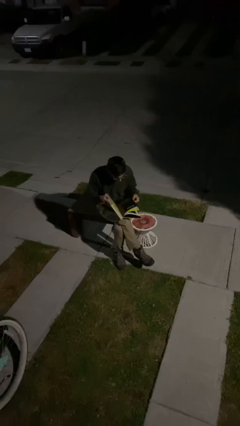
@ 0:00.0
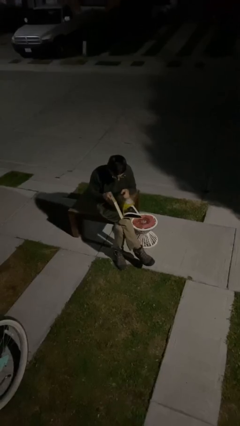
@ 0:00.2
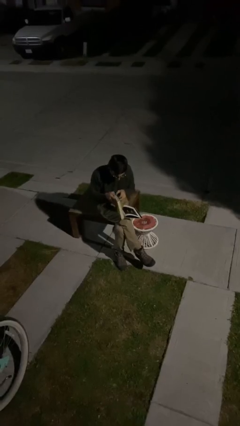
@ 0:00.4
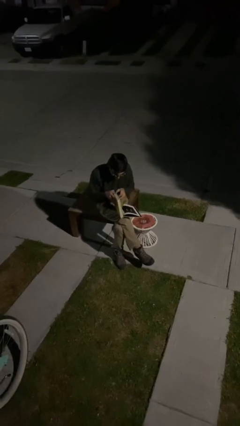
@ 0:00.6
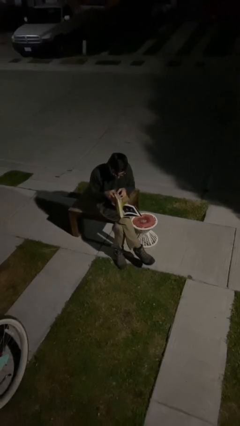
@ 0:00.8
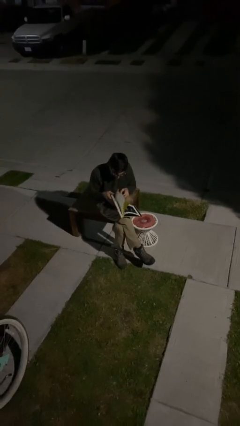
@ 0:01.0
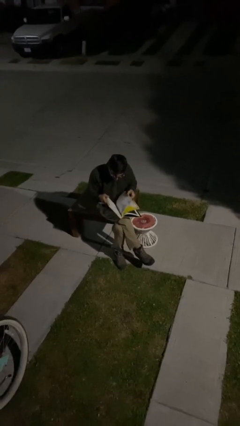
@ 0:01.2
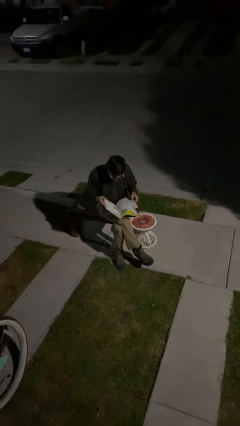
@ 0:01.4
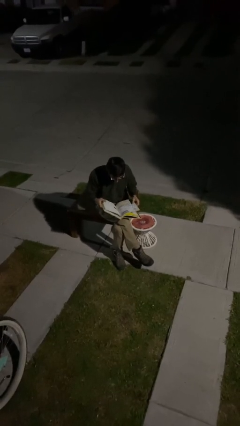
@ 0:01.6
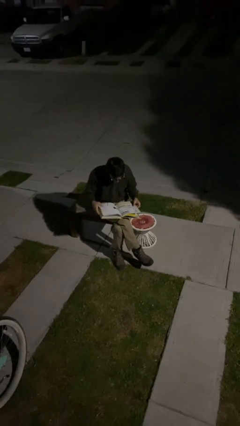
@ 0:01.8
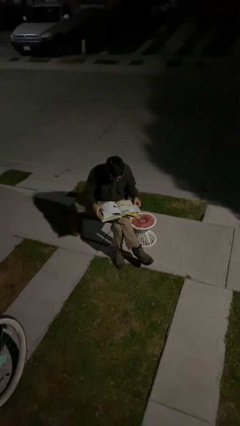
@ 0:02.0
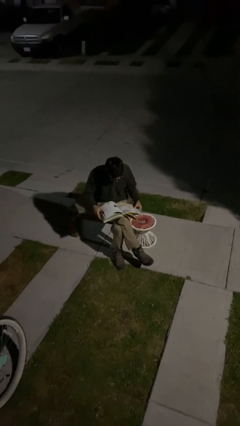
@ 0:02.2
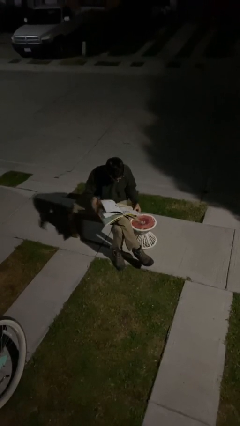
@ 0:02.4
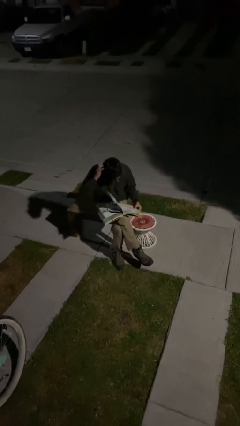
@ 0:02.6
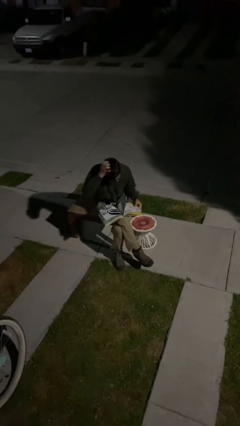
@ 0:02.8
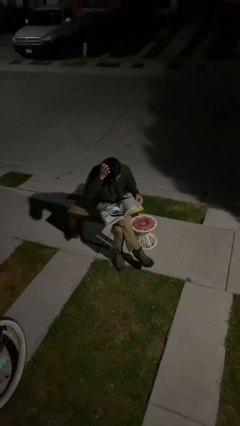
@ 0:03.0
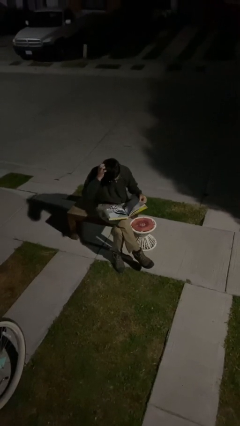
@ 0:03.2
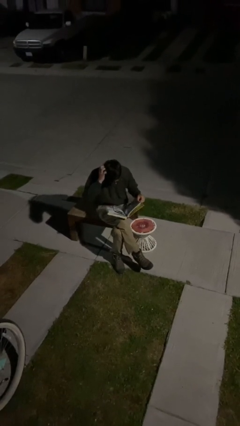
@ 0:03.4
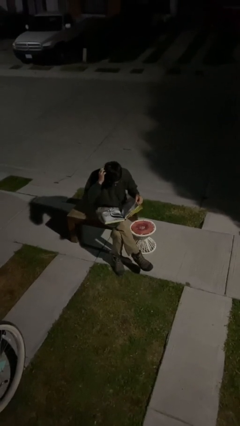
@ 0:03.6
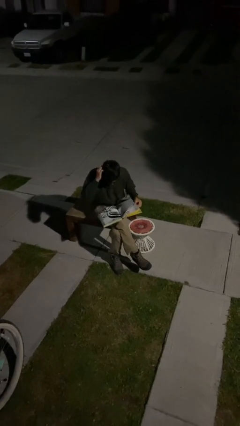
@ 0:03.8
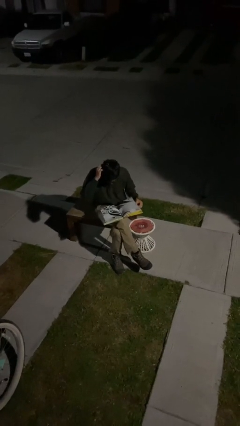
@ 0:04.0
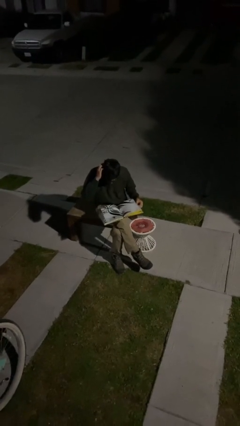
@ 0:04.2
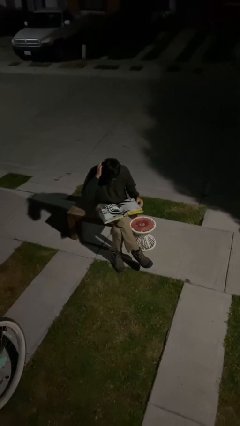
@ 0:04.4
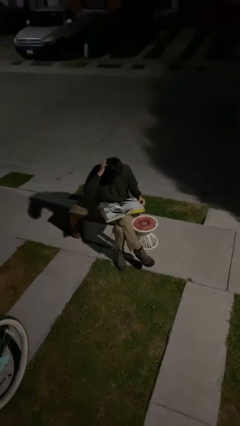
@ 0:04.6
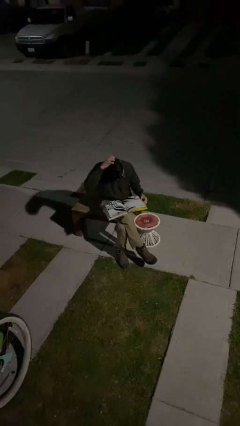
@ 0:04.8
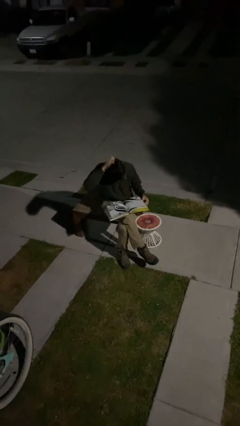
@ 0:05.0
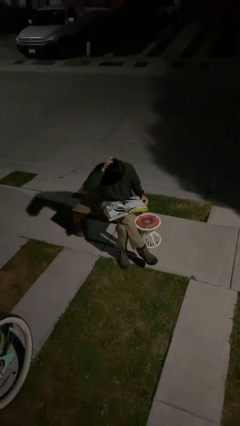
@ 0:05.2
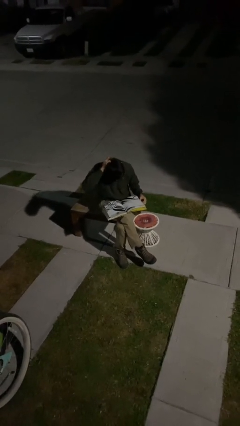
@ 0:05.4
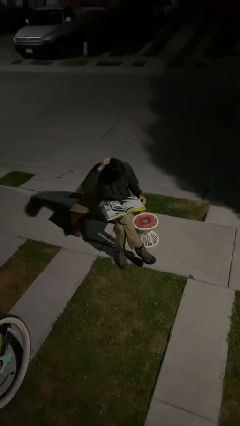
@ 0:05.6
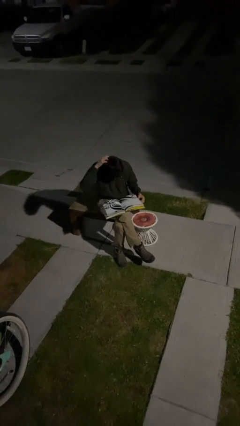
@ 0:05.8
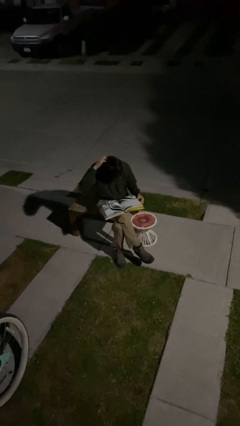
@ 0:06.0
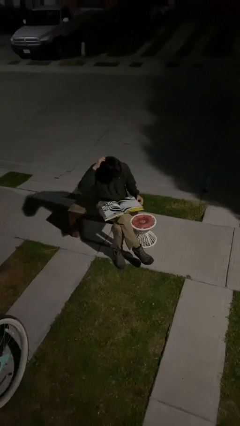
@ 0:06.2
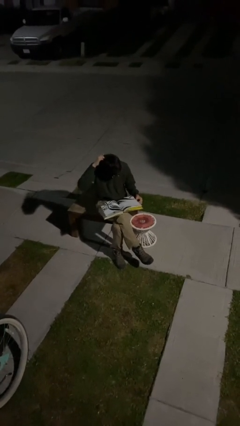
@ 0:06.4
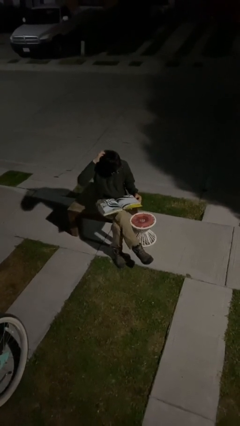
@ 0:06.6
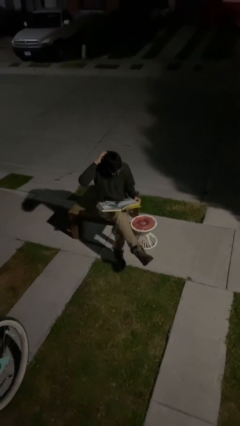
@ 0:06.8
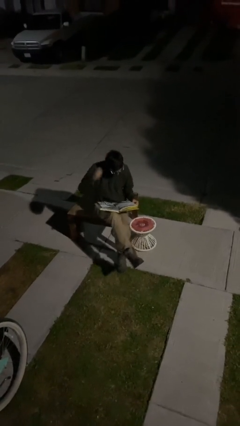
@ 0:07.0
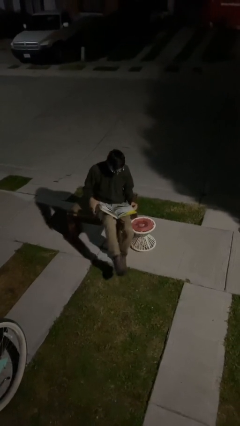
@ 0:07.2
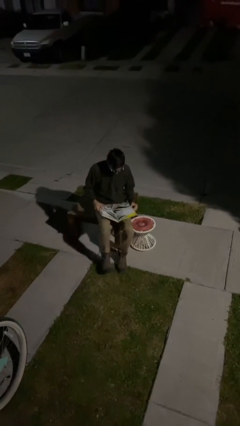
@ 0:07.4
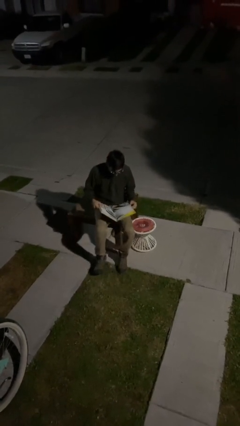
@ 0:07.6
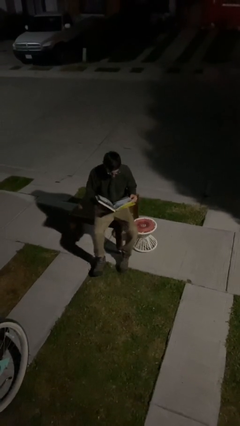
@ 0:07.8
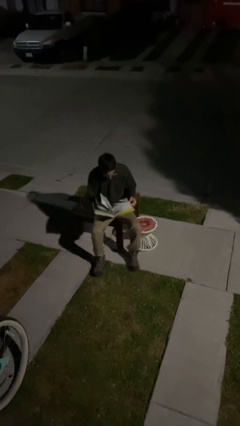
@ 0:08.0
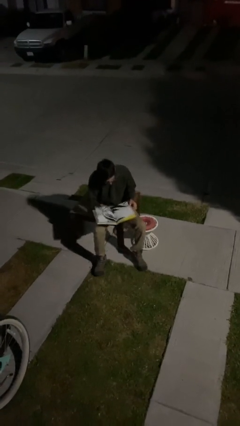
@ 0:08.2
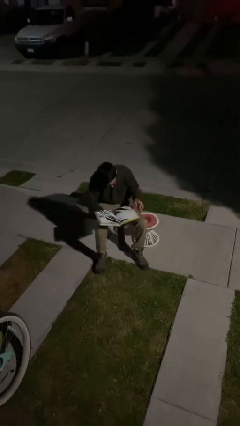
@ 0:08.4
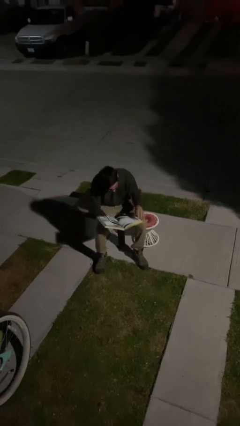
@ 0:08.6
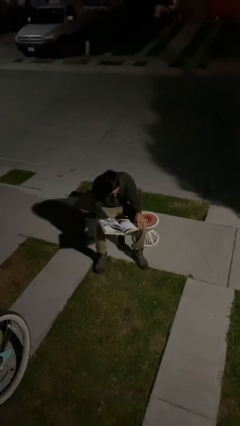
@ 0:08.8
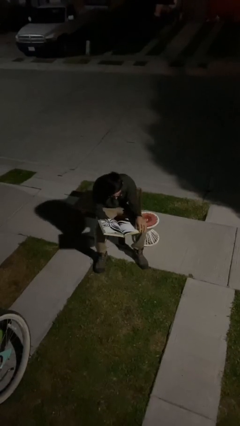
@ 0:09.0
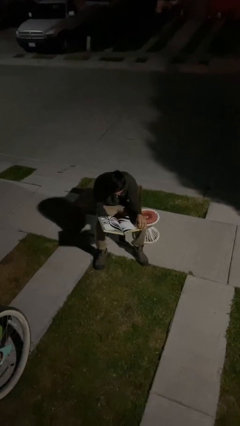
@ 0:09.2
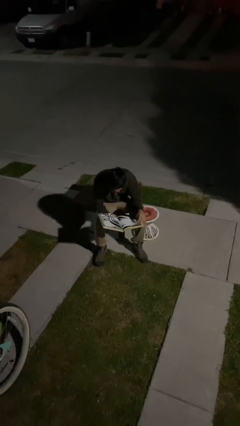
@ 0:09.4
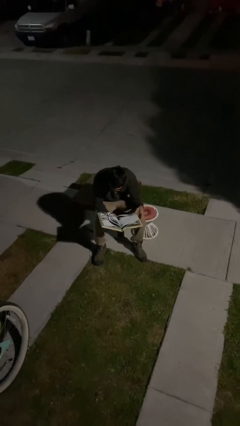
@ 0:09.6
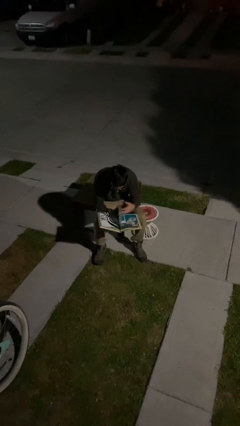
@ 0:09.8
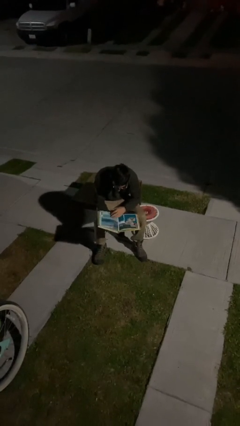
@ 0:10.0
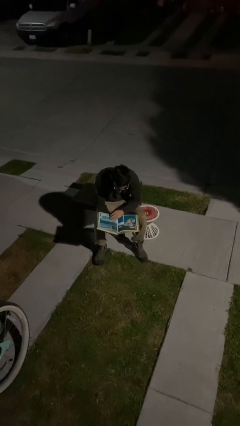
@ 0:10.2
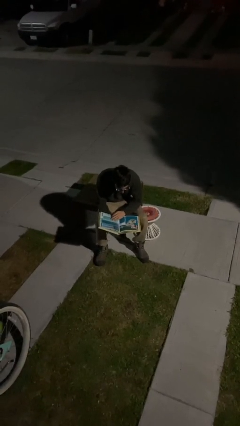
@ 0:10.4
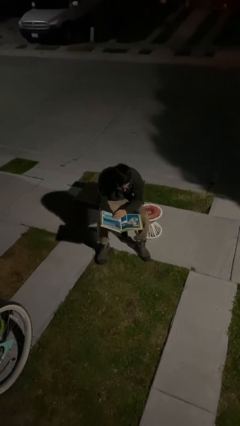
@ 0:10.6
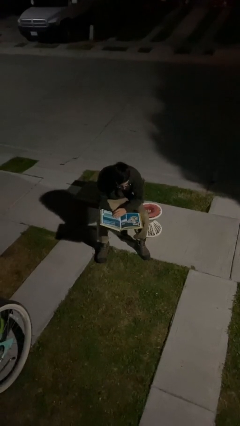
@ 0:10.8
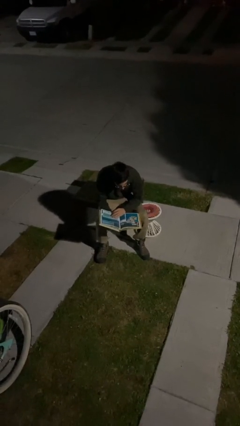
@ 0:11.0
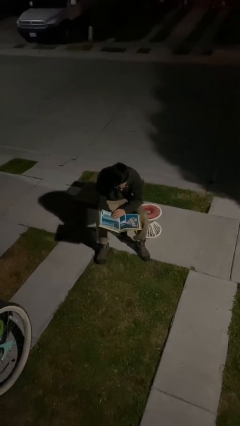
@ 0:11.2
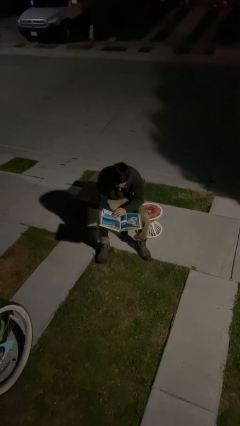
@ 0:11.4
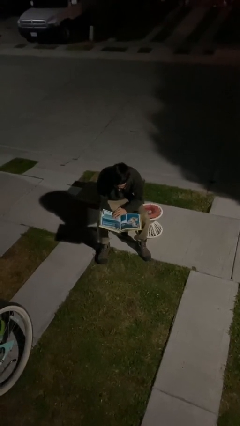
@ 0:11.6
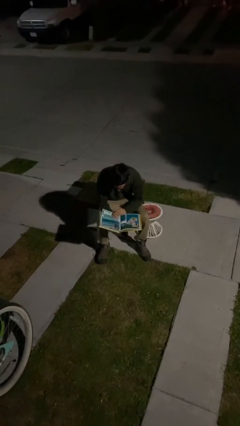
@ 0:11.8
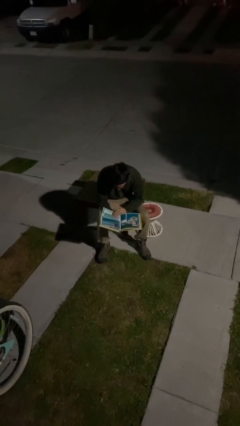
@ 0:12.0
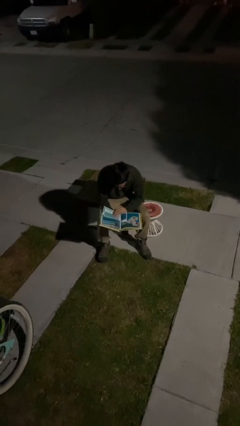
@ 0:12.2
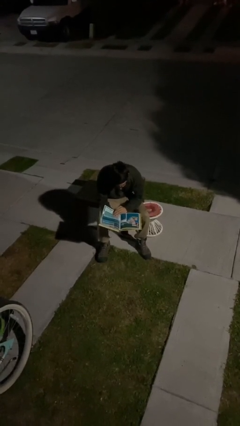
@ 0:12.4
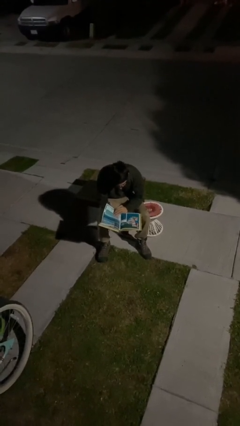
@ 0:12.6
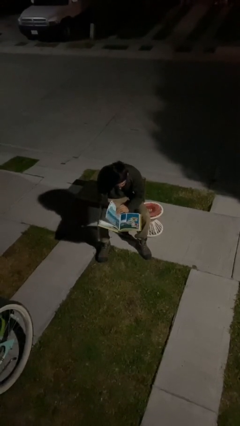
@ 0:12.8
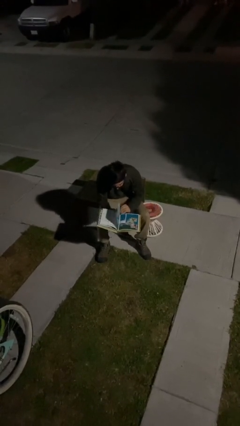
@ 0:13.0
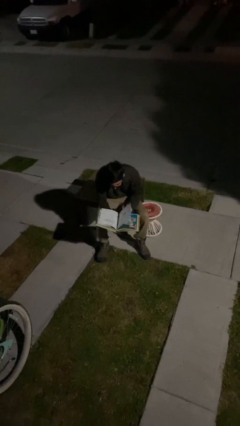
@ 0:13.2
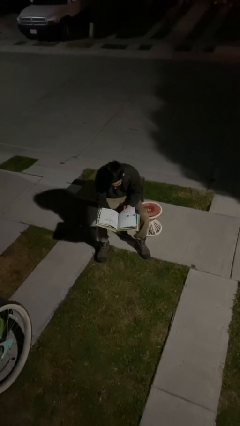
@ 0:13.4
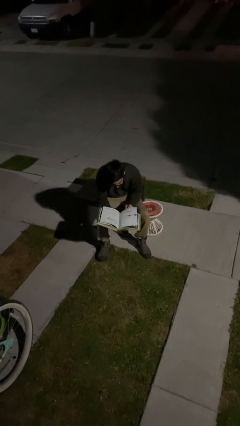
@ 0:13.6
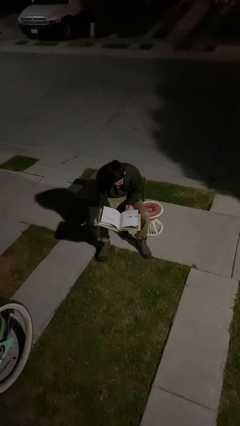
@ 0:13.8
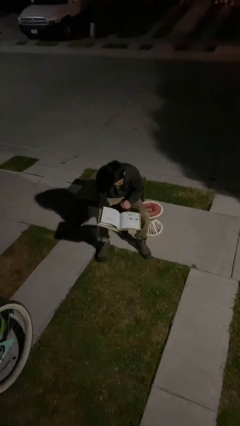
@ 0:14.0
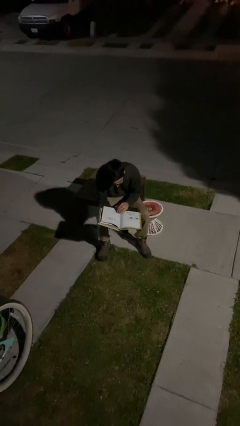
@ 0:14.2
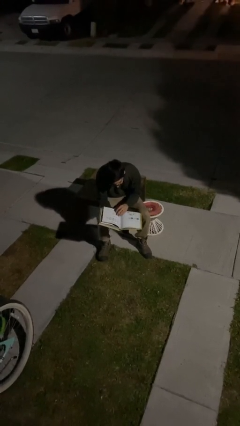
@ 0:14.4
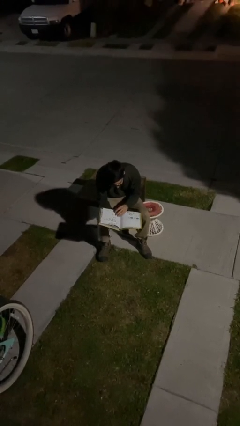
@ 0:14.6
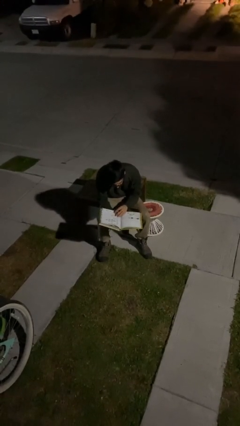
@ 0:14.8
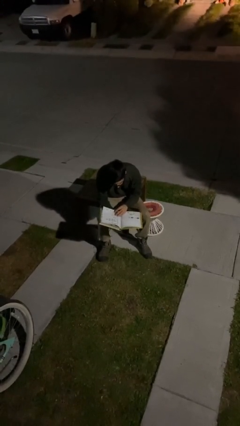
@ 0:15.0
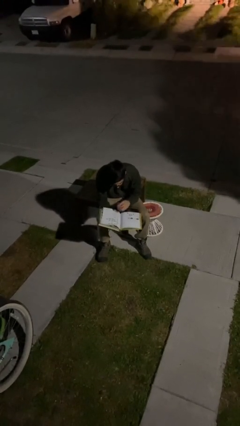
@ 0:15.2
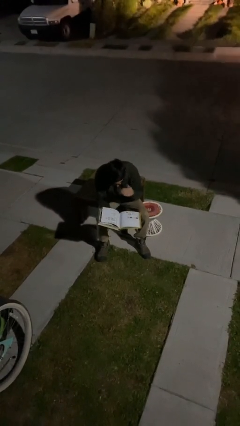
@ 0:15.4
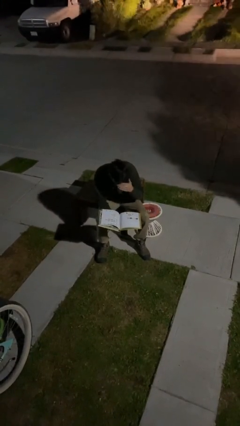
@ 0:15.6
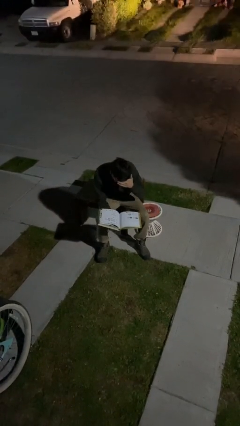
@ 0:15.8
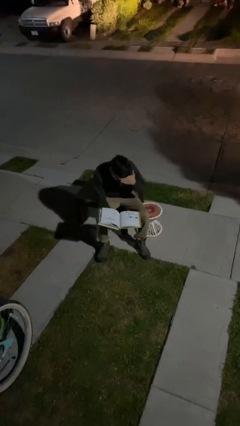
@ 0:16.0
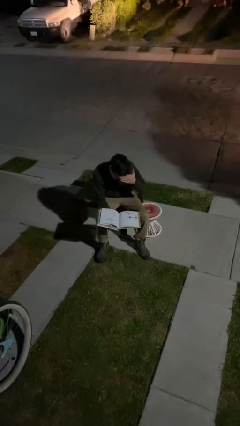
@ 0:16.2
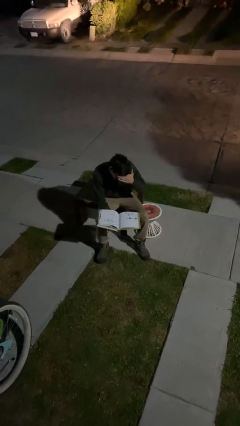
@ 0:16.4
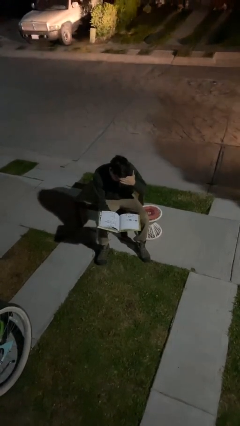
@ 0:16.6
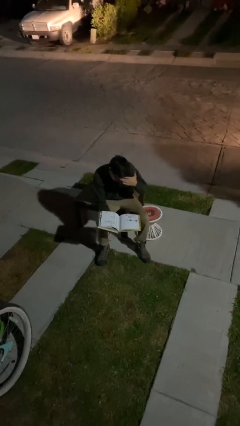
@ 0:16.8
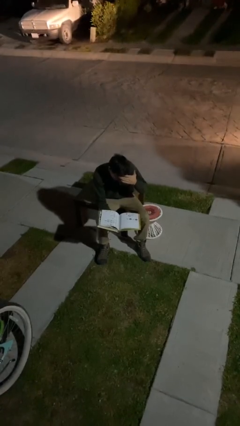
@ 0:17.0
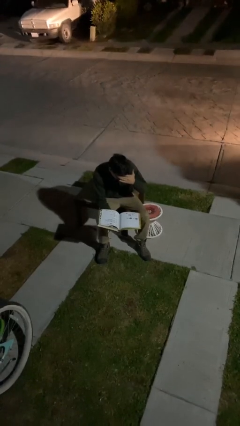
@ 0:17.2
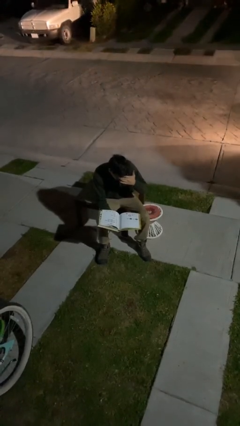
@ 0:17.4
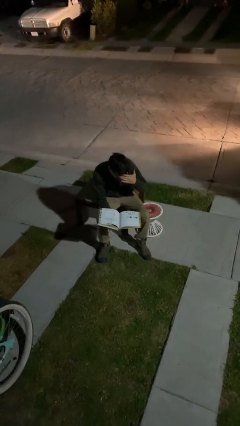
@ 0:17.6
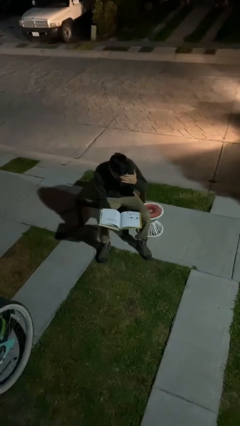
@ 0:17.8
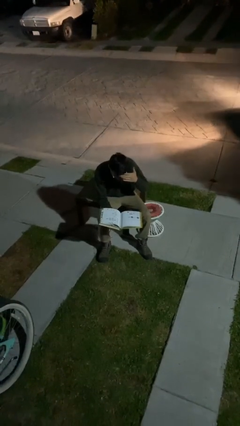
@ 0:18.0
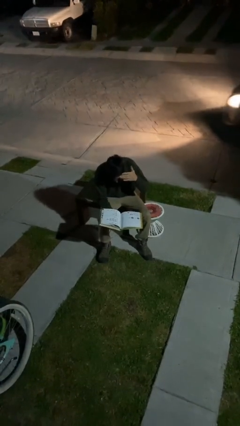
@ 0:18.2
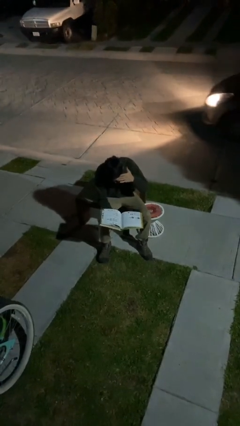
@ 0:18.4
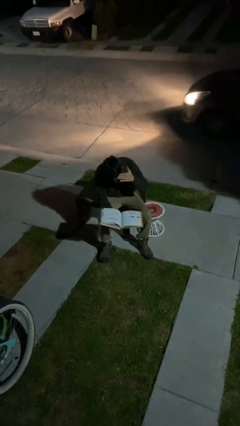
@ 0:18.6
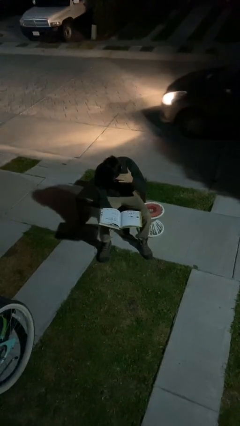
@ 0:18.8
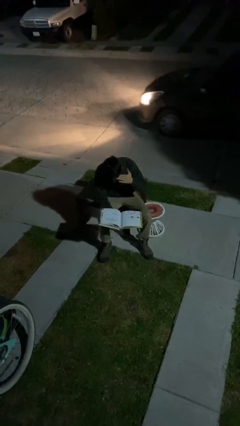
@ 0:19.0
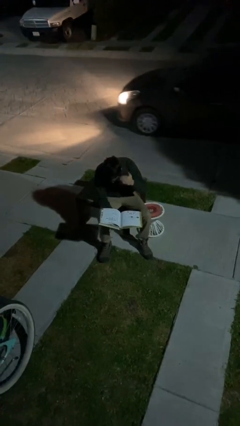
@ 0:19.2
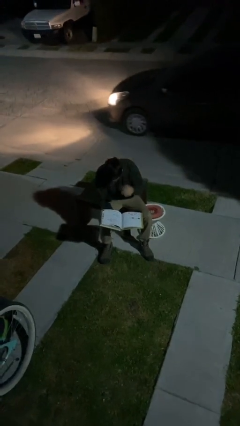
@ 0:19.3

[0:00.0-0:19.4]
person reads document
